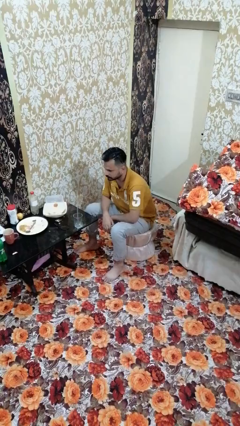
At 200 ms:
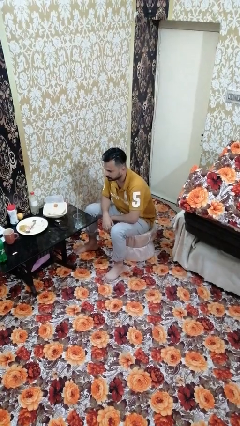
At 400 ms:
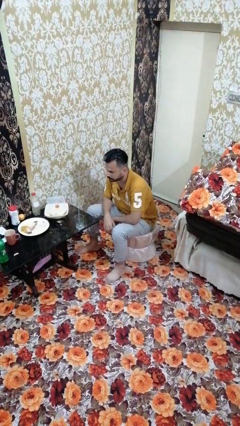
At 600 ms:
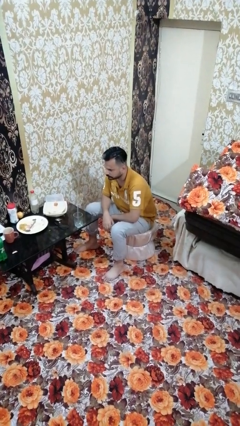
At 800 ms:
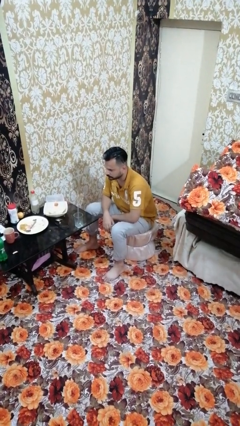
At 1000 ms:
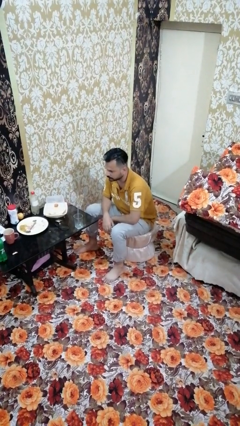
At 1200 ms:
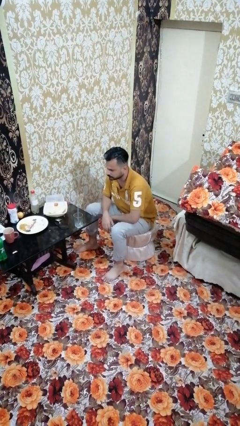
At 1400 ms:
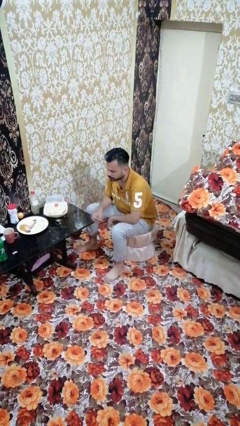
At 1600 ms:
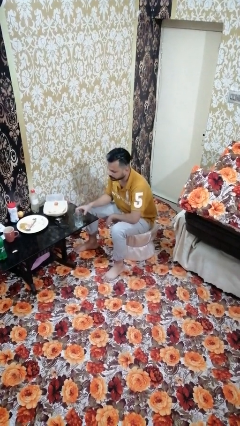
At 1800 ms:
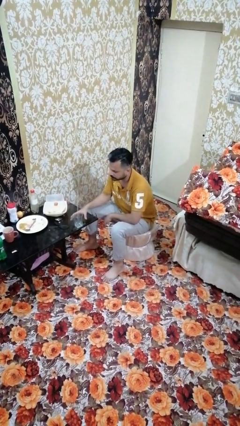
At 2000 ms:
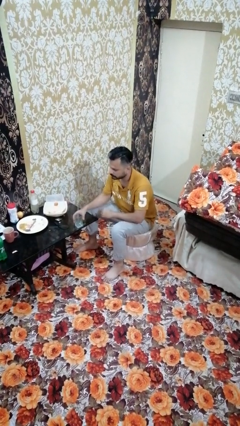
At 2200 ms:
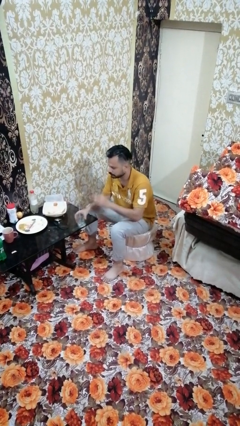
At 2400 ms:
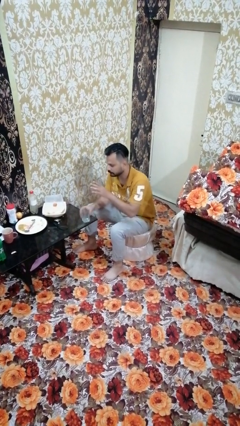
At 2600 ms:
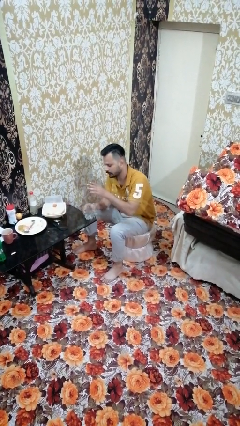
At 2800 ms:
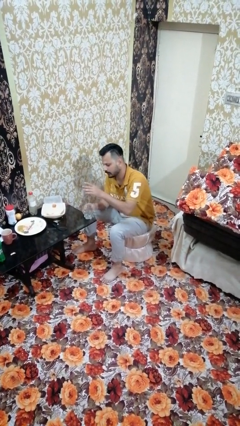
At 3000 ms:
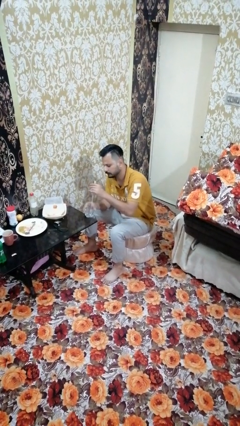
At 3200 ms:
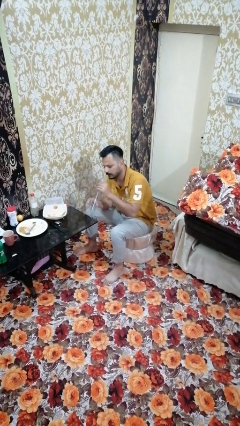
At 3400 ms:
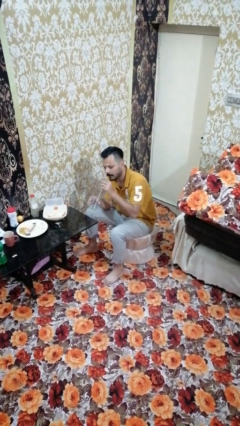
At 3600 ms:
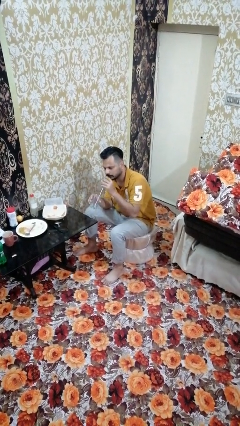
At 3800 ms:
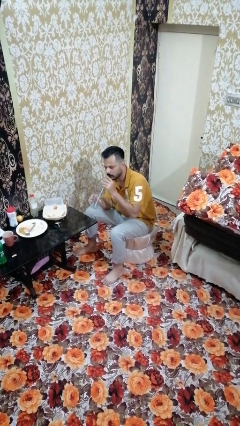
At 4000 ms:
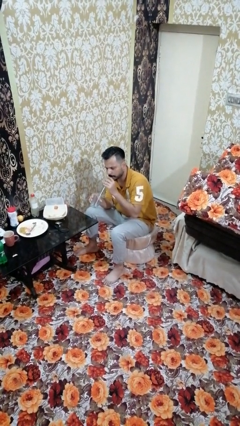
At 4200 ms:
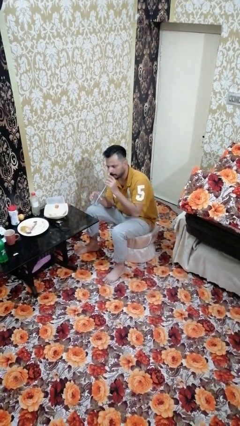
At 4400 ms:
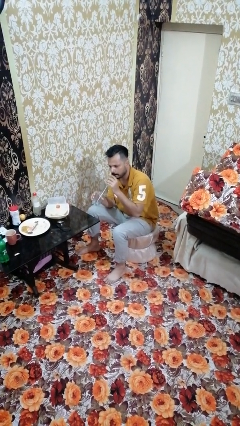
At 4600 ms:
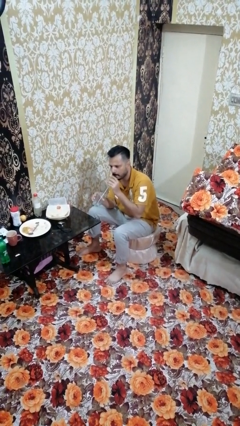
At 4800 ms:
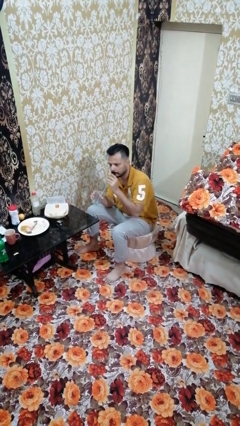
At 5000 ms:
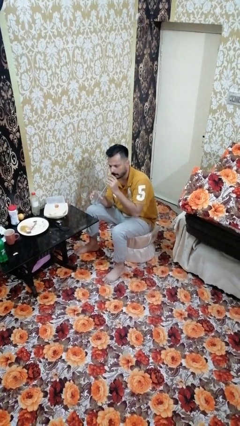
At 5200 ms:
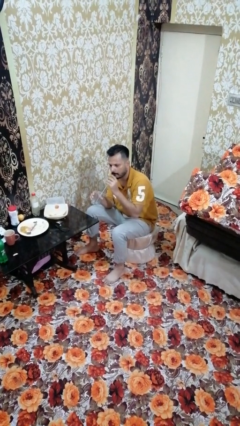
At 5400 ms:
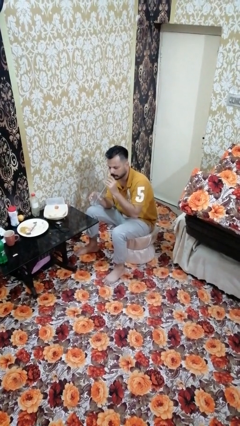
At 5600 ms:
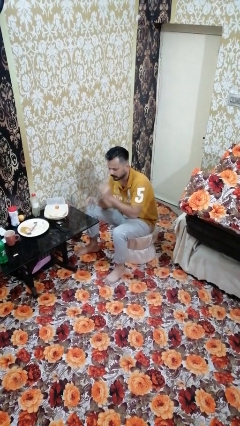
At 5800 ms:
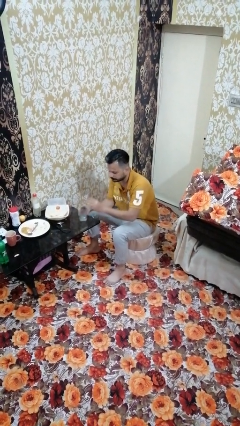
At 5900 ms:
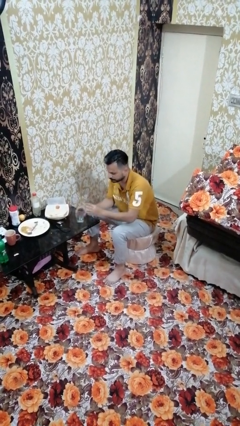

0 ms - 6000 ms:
person drinks from straw

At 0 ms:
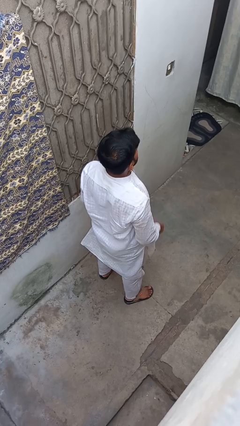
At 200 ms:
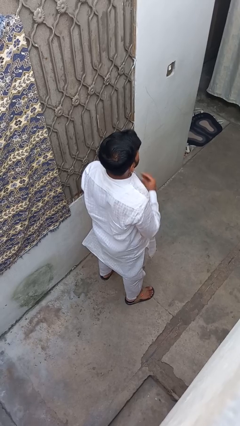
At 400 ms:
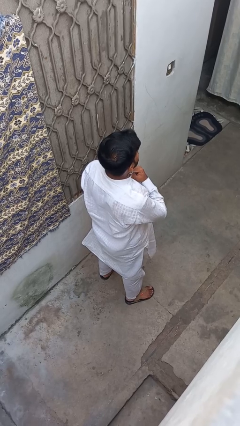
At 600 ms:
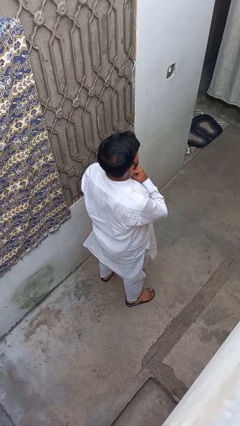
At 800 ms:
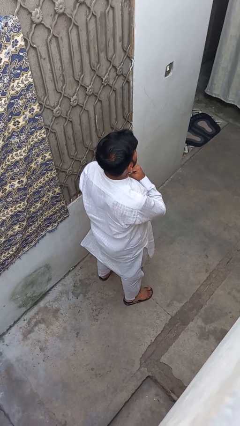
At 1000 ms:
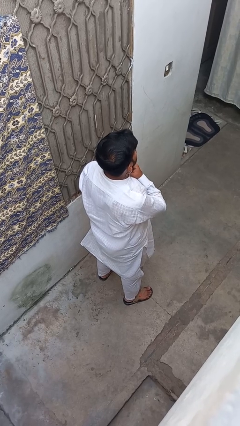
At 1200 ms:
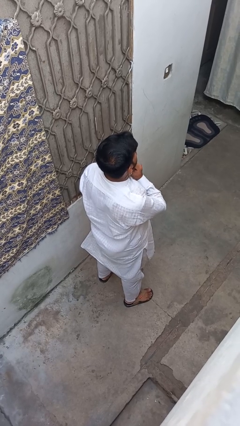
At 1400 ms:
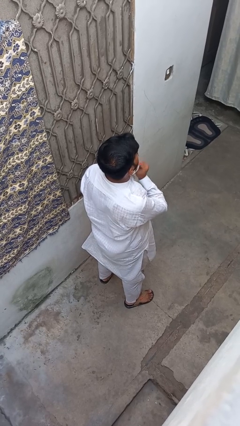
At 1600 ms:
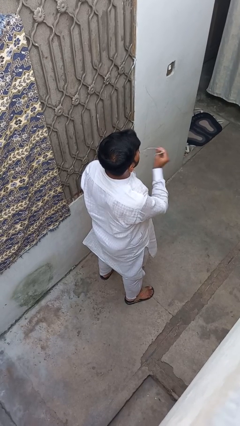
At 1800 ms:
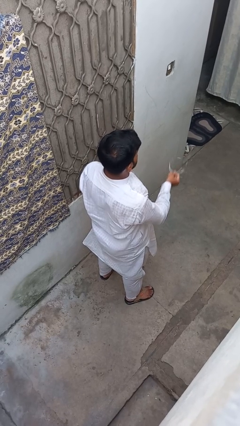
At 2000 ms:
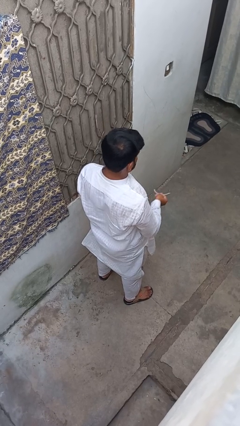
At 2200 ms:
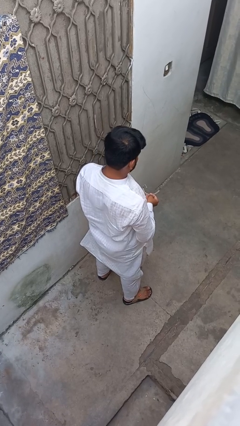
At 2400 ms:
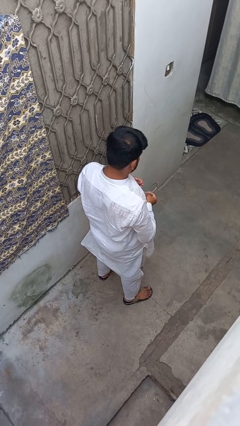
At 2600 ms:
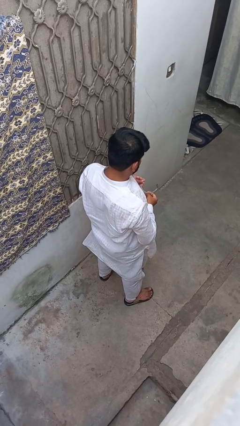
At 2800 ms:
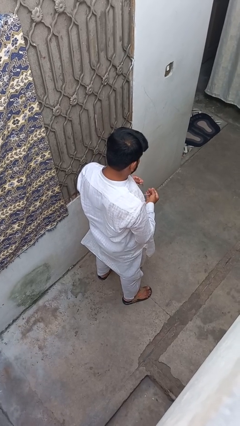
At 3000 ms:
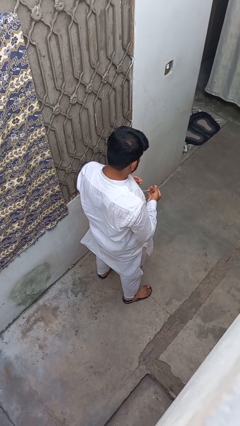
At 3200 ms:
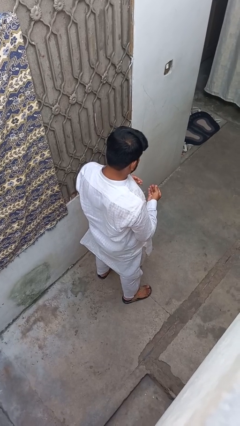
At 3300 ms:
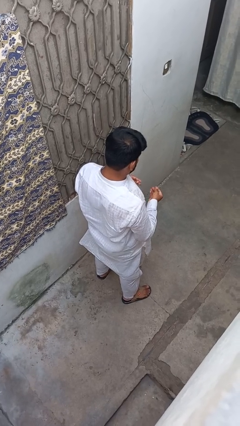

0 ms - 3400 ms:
person takes off necklace

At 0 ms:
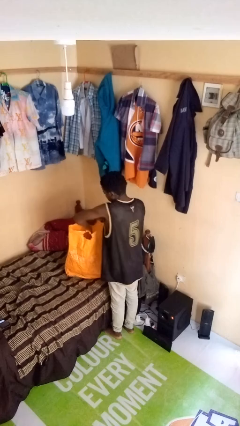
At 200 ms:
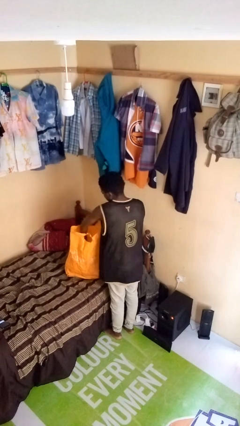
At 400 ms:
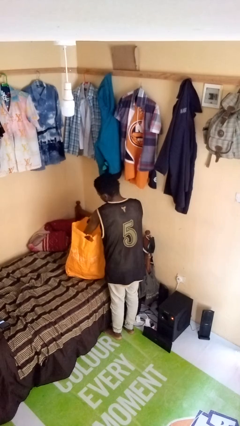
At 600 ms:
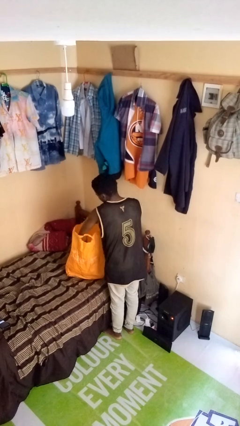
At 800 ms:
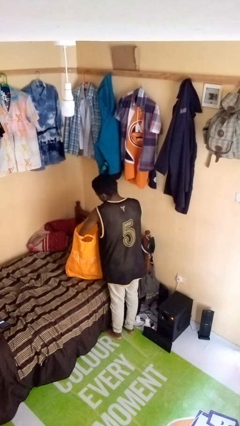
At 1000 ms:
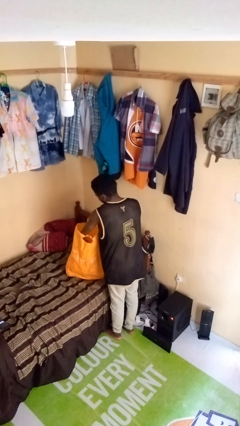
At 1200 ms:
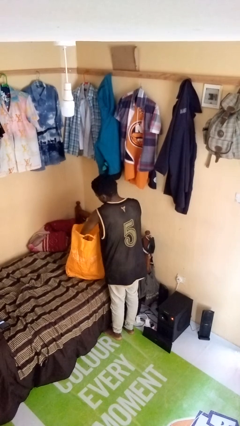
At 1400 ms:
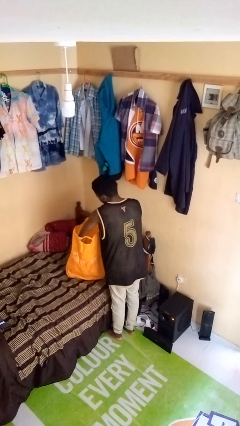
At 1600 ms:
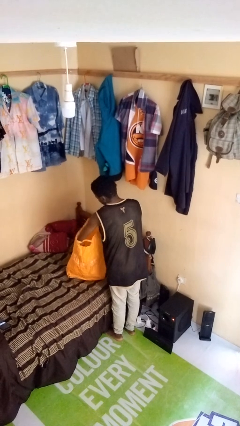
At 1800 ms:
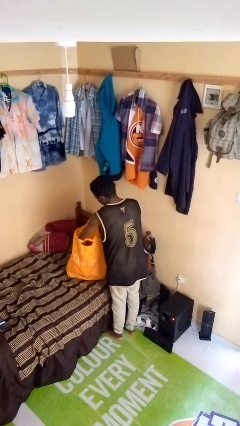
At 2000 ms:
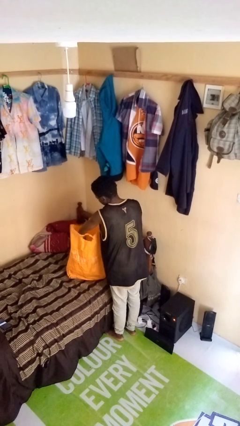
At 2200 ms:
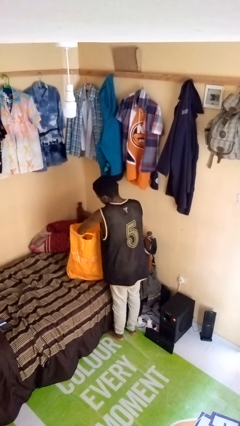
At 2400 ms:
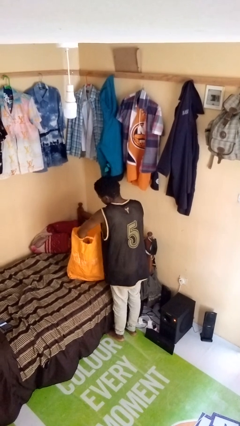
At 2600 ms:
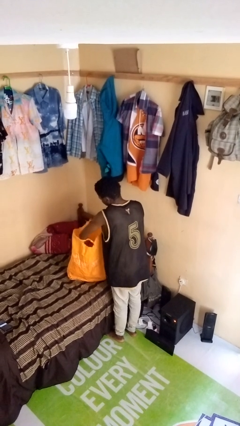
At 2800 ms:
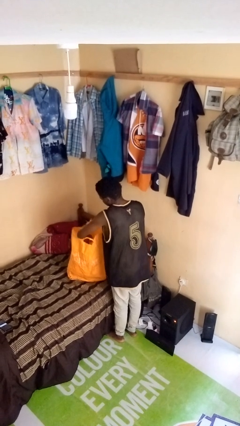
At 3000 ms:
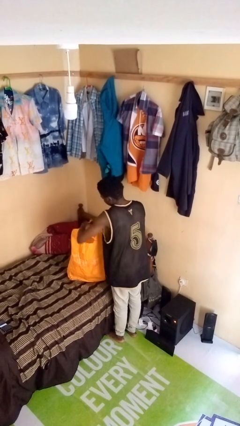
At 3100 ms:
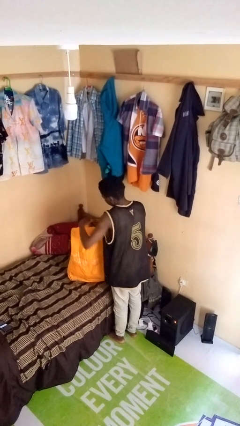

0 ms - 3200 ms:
person searches in bag

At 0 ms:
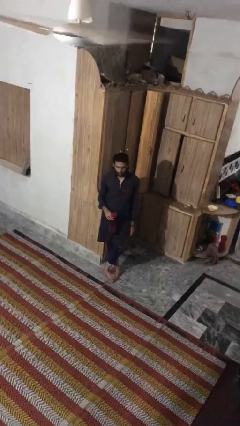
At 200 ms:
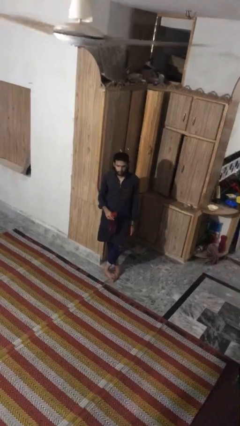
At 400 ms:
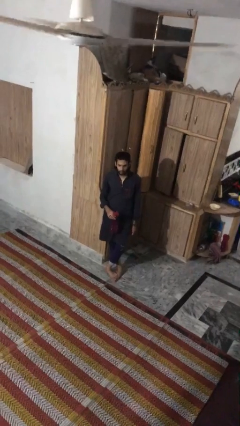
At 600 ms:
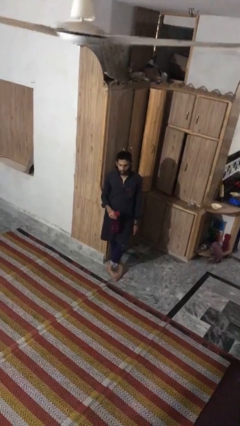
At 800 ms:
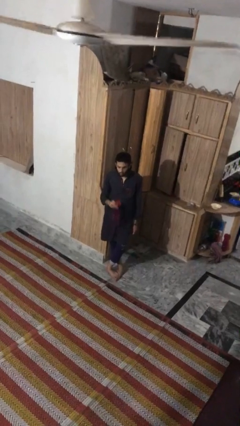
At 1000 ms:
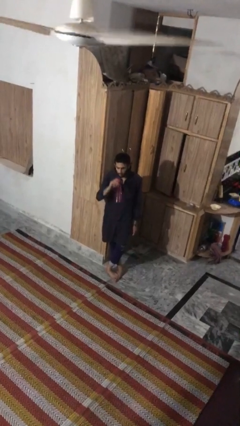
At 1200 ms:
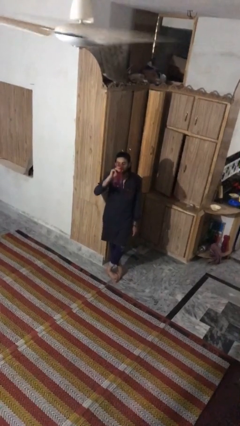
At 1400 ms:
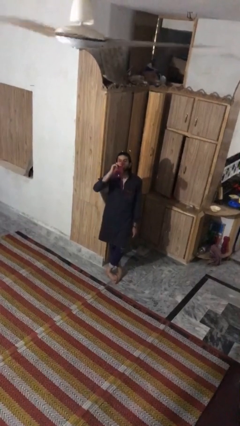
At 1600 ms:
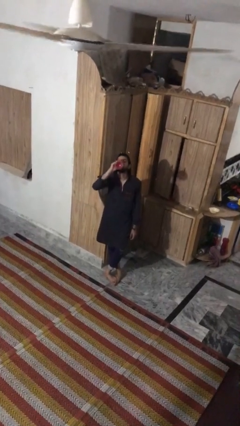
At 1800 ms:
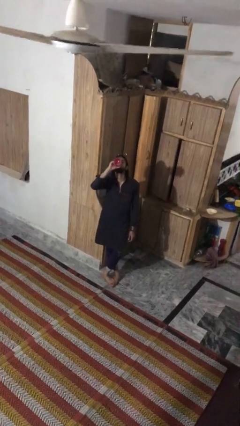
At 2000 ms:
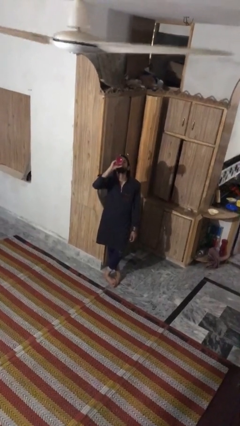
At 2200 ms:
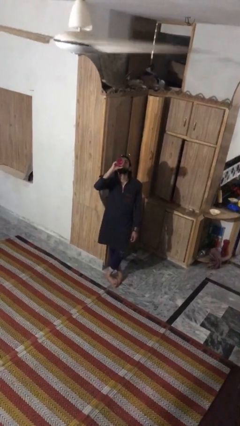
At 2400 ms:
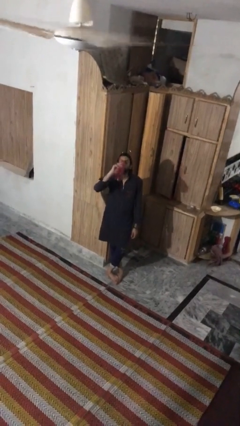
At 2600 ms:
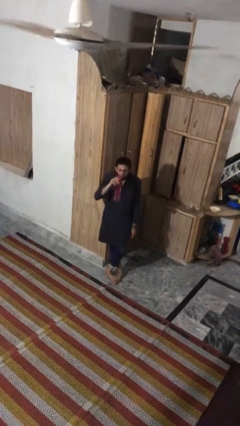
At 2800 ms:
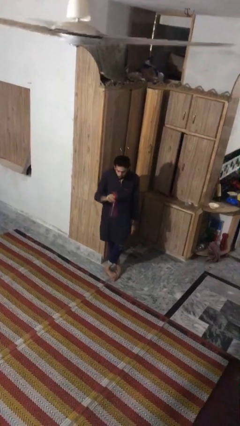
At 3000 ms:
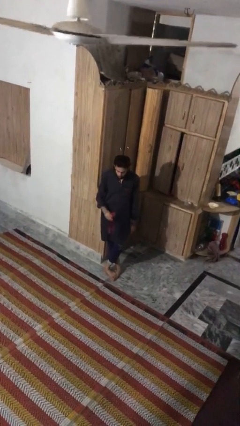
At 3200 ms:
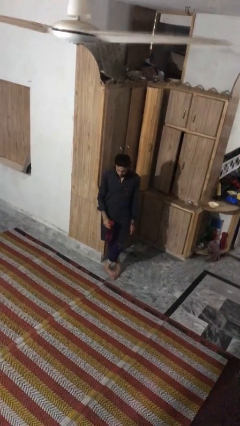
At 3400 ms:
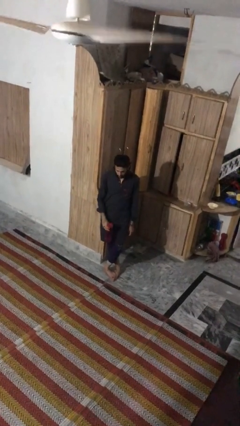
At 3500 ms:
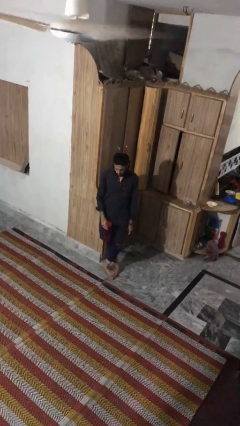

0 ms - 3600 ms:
person drinks from bottle

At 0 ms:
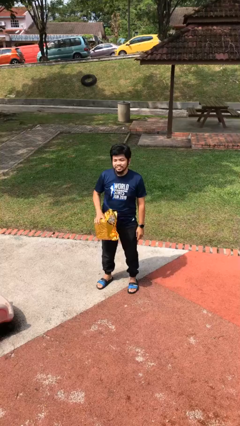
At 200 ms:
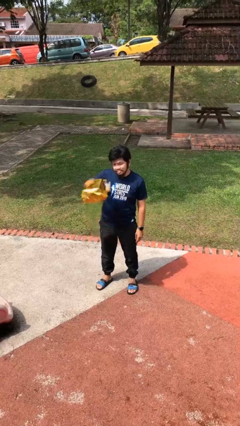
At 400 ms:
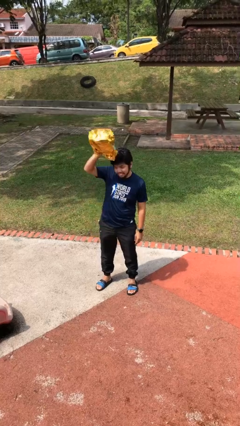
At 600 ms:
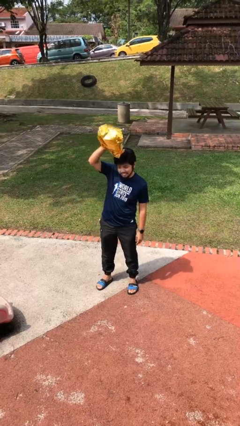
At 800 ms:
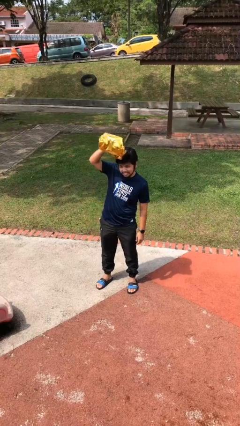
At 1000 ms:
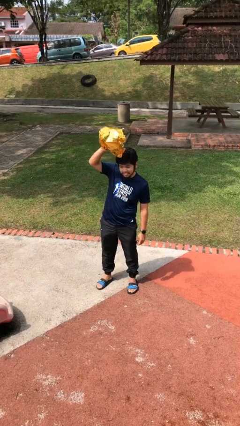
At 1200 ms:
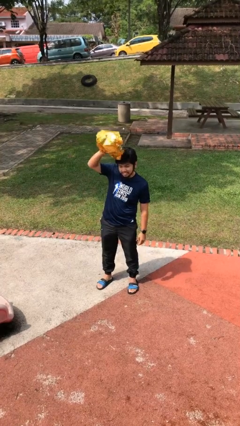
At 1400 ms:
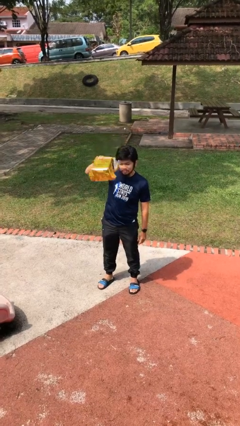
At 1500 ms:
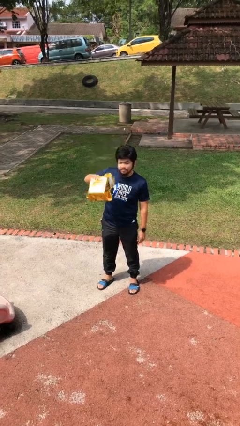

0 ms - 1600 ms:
person holds object above head
